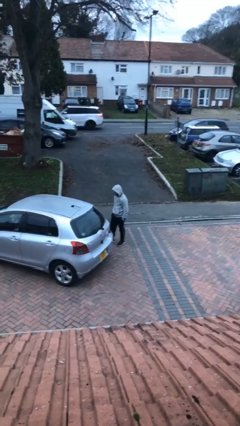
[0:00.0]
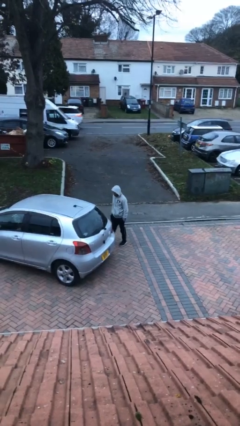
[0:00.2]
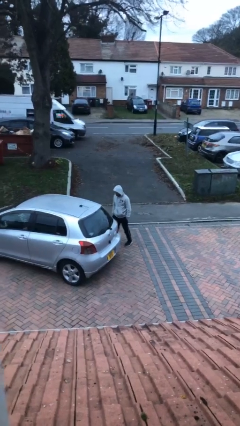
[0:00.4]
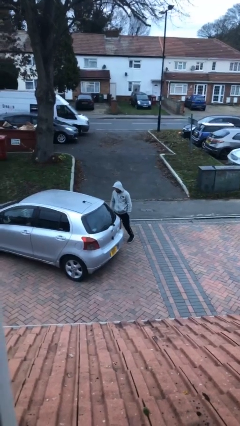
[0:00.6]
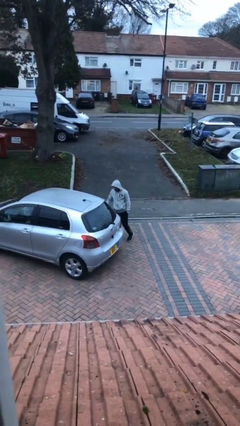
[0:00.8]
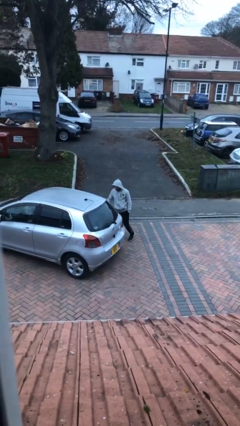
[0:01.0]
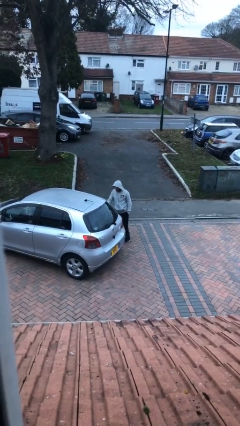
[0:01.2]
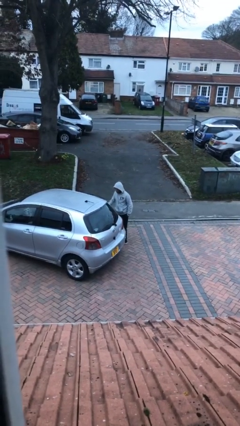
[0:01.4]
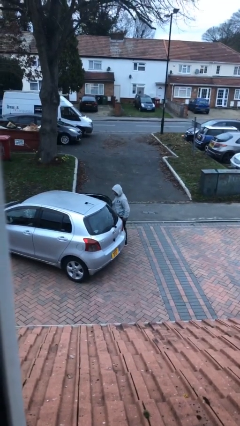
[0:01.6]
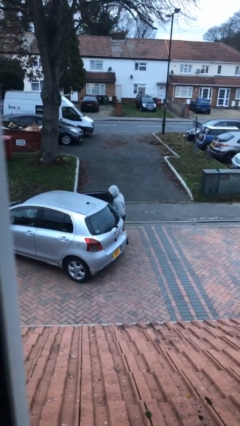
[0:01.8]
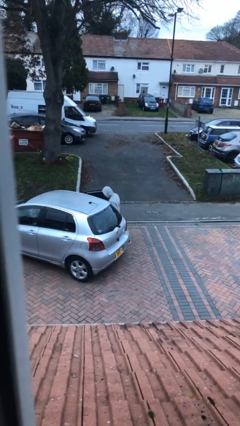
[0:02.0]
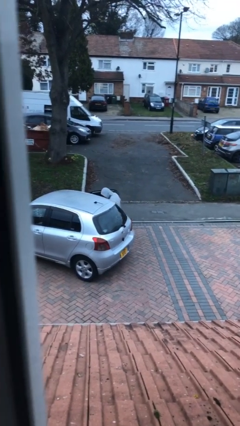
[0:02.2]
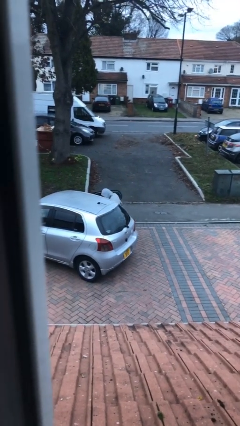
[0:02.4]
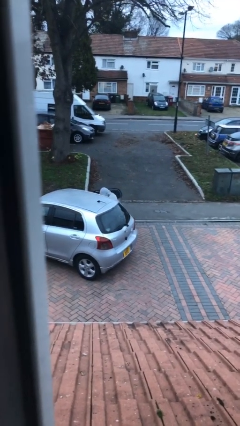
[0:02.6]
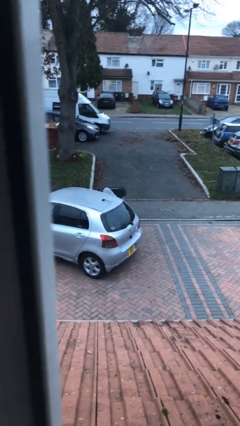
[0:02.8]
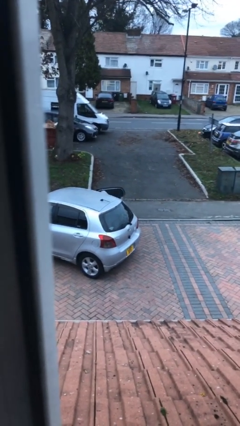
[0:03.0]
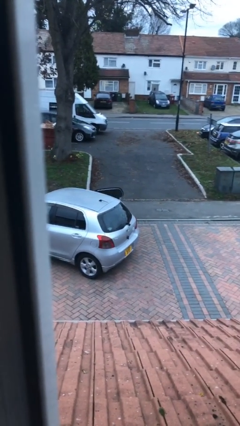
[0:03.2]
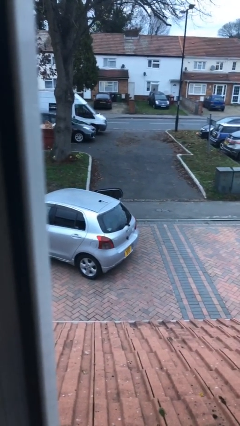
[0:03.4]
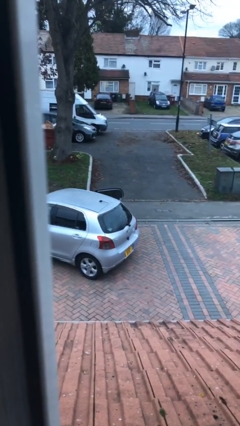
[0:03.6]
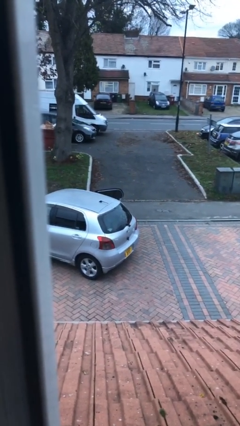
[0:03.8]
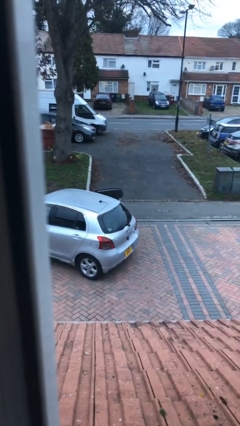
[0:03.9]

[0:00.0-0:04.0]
person enters car

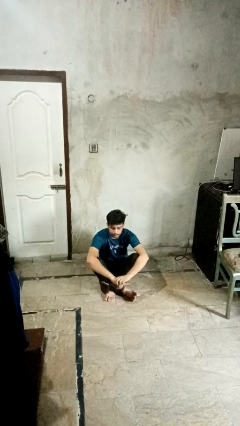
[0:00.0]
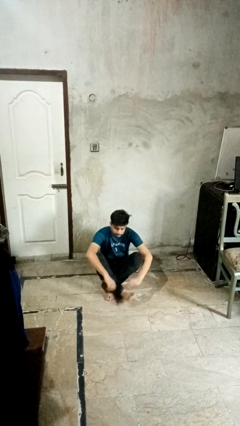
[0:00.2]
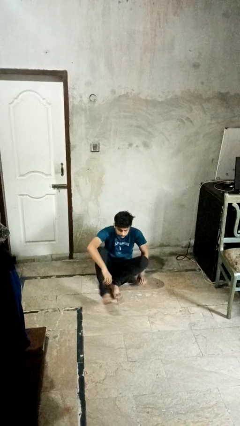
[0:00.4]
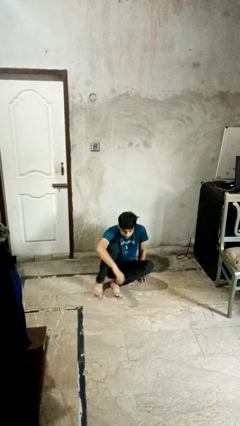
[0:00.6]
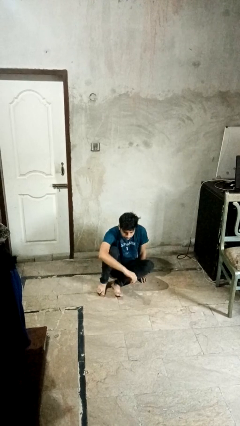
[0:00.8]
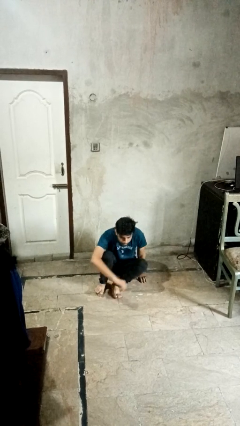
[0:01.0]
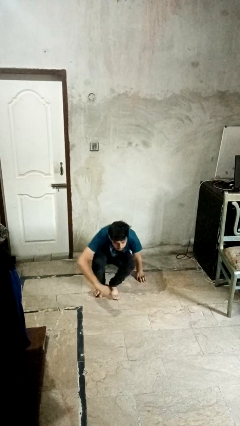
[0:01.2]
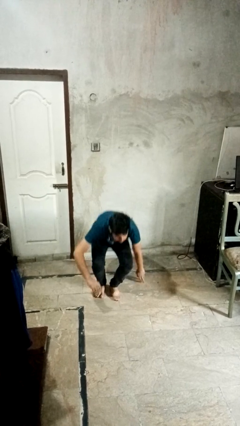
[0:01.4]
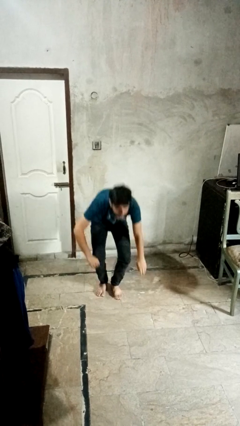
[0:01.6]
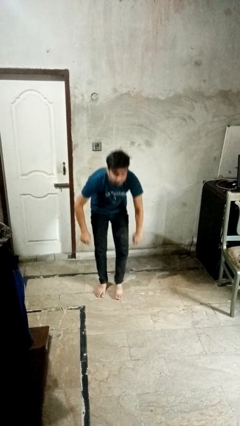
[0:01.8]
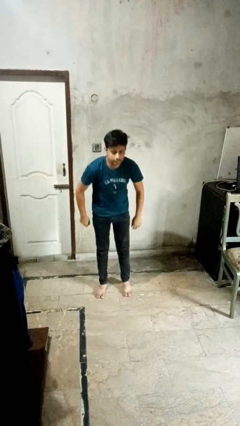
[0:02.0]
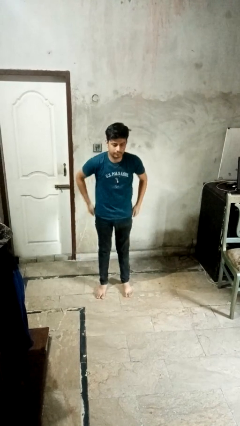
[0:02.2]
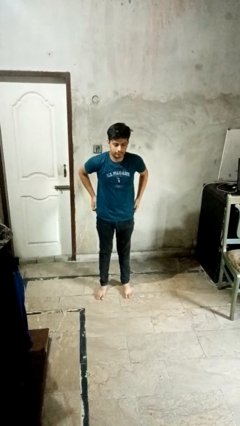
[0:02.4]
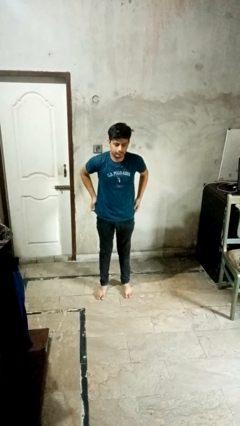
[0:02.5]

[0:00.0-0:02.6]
person stands up from floor

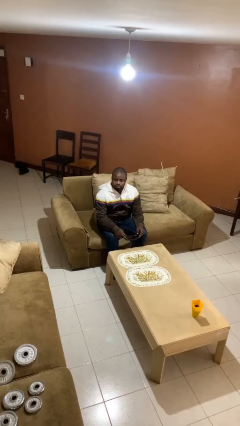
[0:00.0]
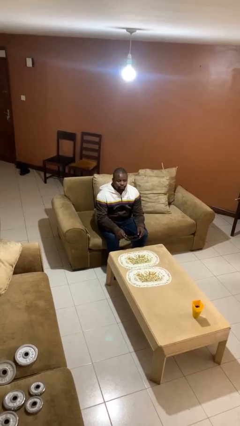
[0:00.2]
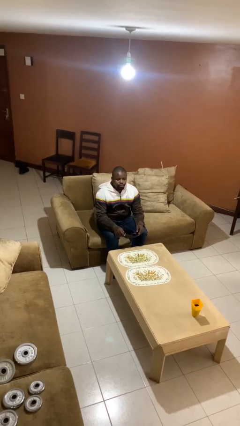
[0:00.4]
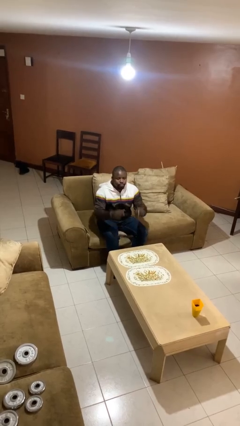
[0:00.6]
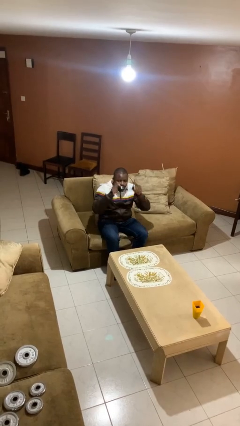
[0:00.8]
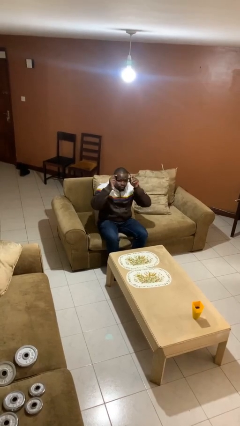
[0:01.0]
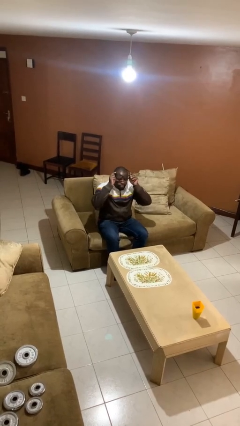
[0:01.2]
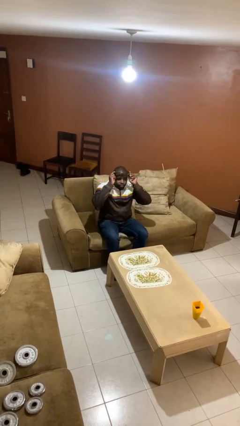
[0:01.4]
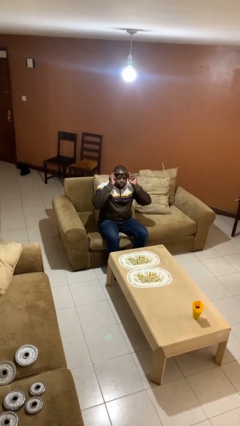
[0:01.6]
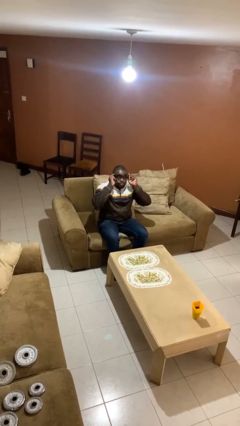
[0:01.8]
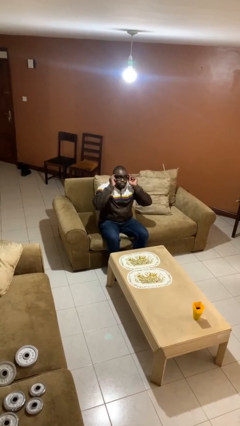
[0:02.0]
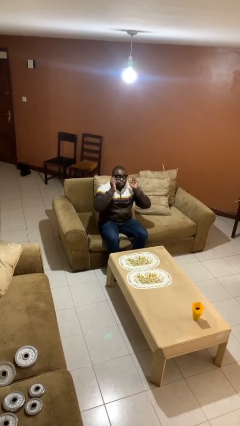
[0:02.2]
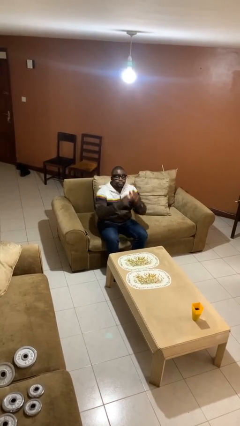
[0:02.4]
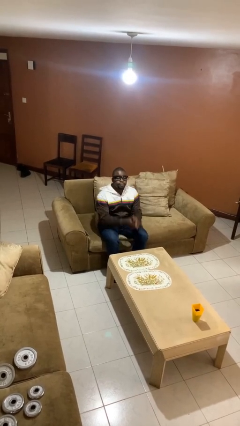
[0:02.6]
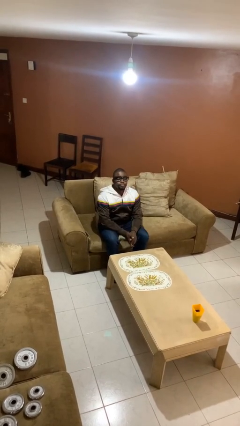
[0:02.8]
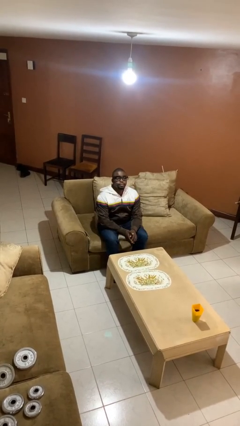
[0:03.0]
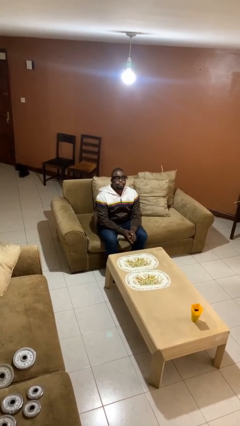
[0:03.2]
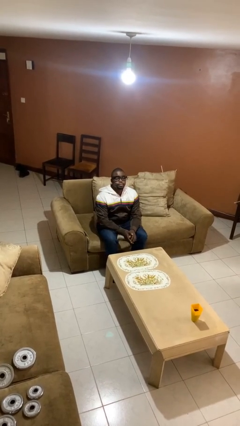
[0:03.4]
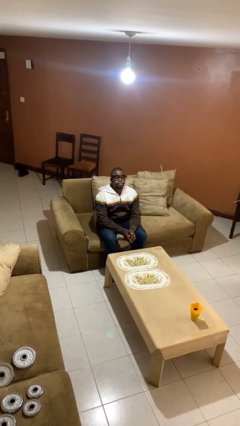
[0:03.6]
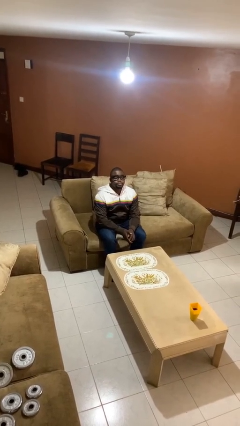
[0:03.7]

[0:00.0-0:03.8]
person puts on glasses

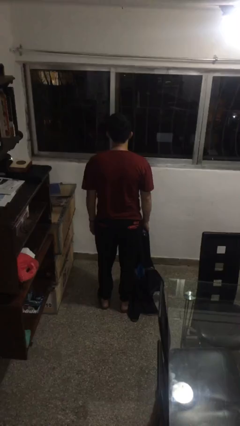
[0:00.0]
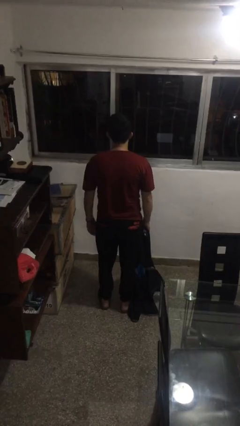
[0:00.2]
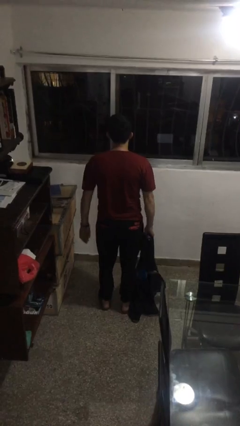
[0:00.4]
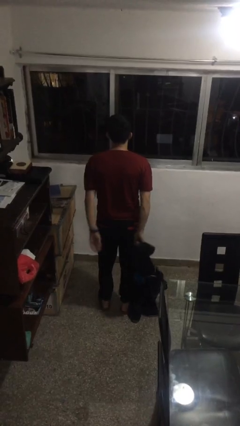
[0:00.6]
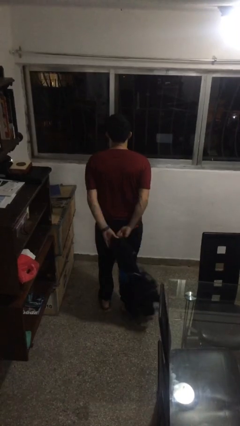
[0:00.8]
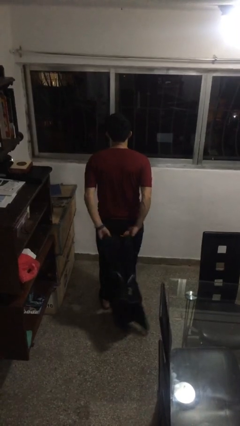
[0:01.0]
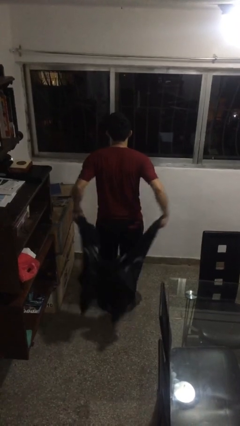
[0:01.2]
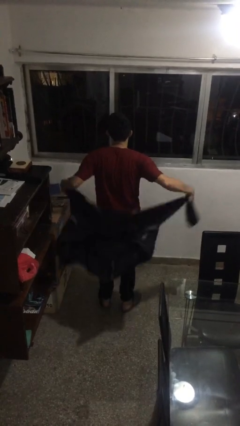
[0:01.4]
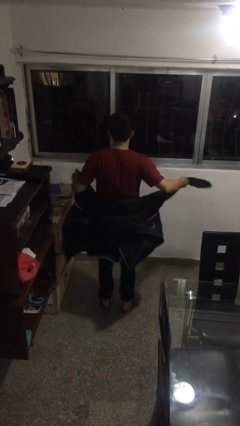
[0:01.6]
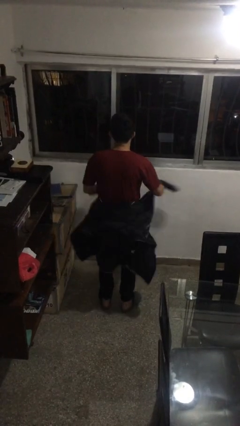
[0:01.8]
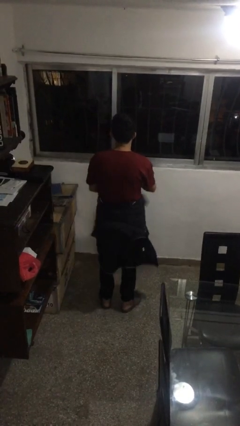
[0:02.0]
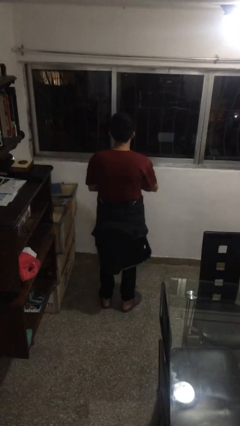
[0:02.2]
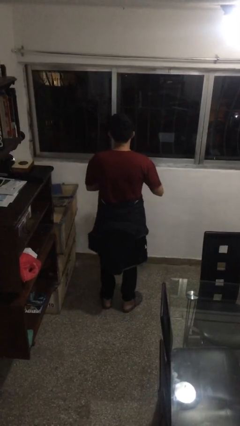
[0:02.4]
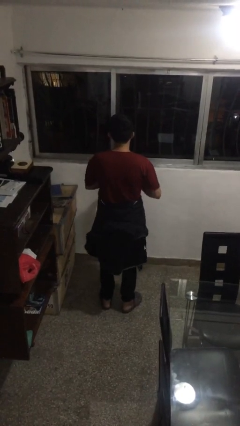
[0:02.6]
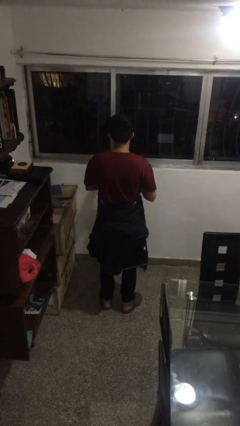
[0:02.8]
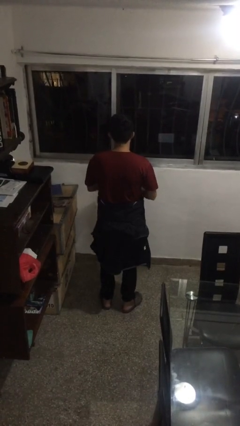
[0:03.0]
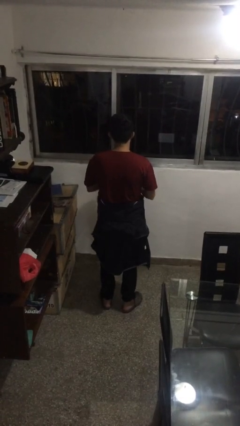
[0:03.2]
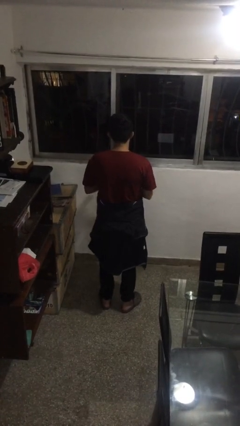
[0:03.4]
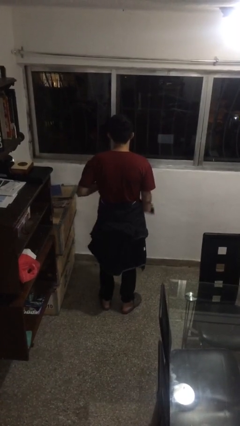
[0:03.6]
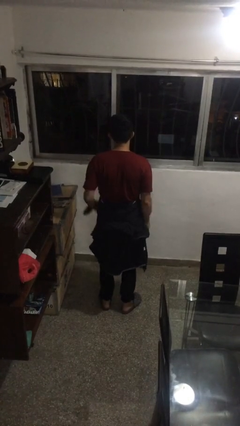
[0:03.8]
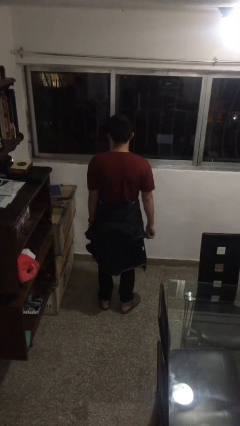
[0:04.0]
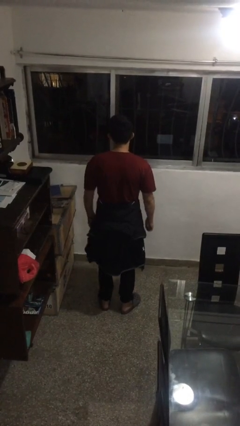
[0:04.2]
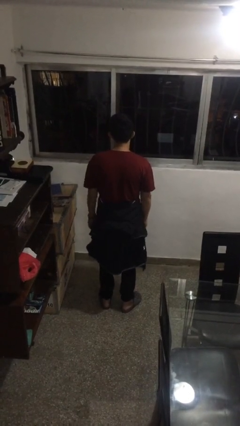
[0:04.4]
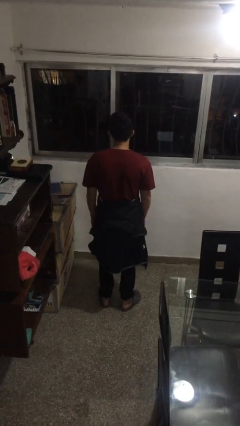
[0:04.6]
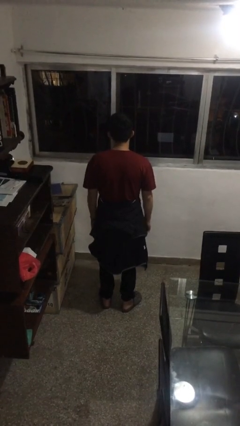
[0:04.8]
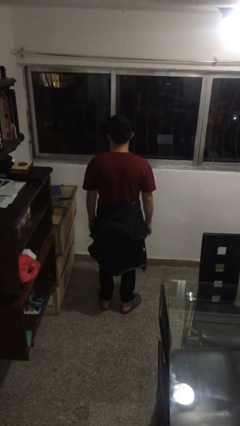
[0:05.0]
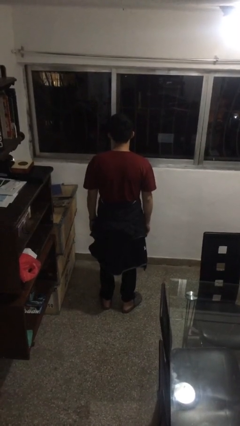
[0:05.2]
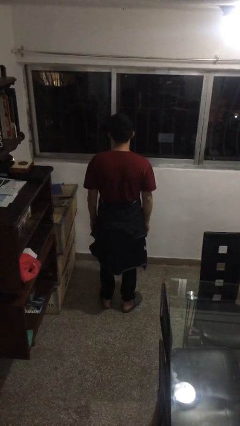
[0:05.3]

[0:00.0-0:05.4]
person ties jacket around waist

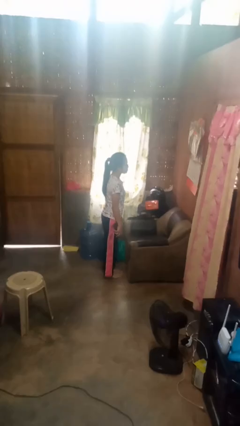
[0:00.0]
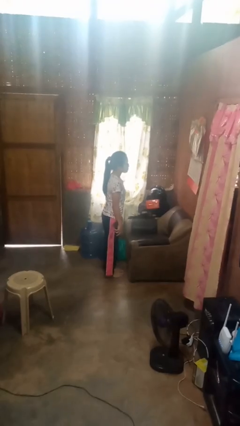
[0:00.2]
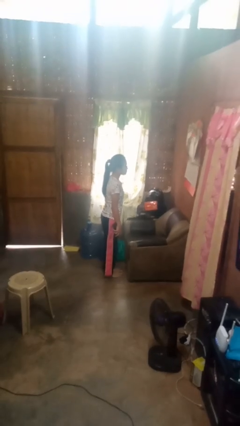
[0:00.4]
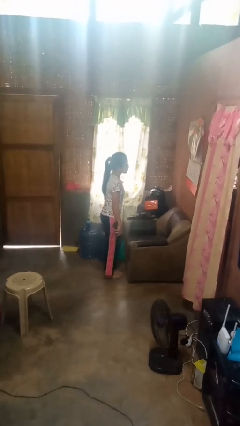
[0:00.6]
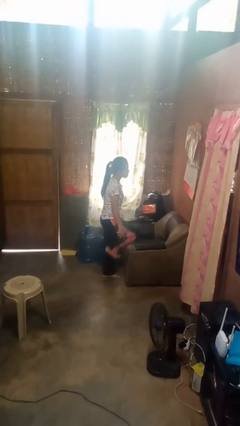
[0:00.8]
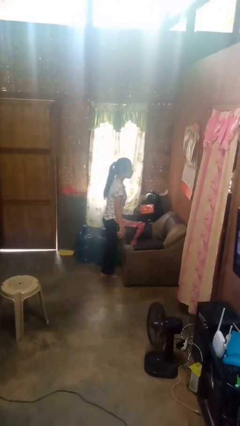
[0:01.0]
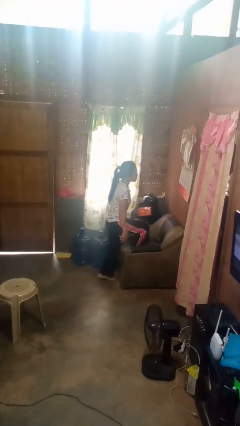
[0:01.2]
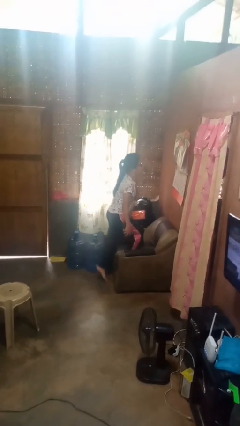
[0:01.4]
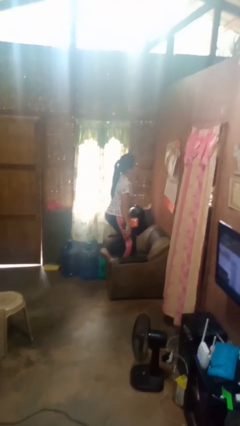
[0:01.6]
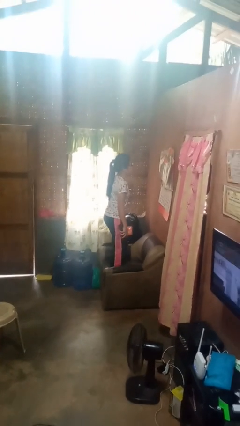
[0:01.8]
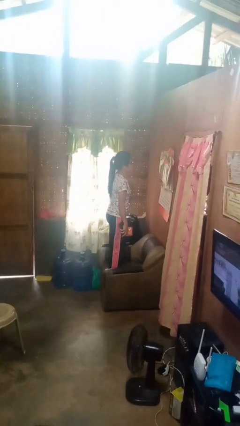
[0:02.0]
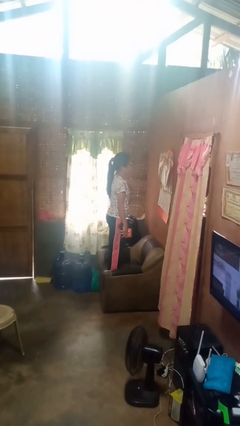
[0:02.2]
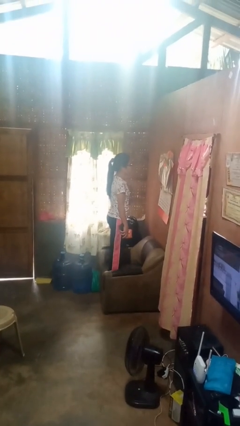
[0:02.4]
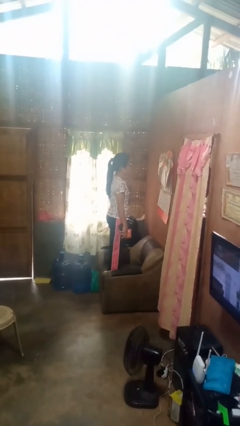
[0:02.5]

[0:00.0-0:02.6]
person climbs on couch
